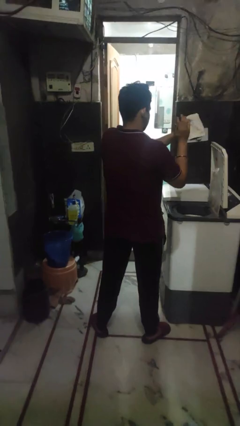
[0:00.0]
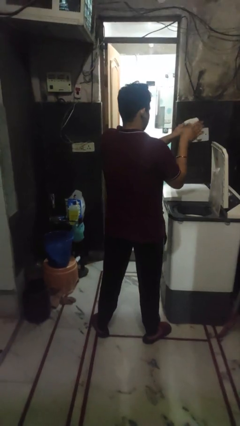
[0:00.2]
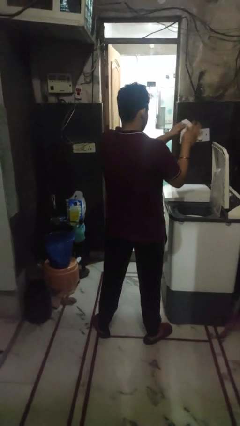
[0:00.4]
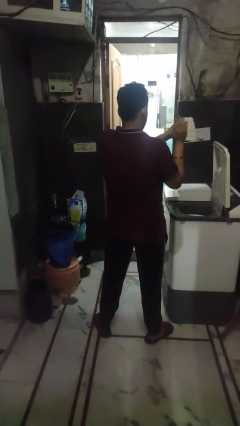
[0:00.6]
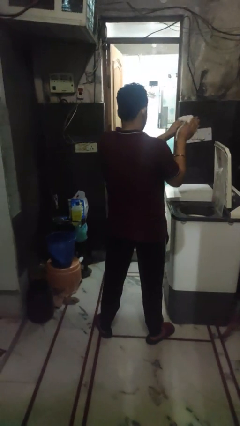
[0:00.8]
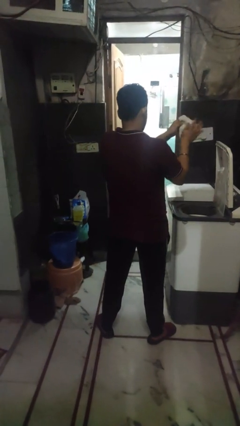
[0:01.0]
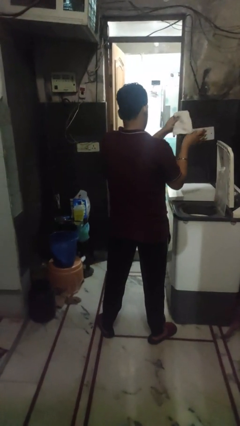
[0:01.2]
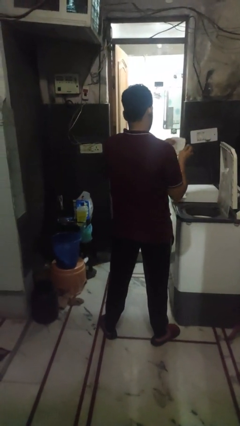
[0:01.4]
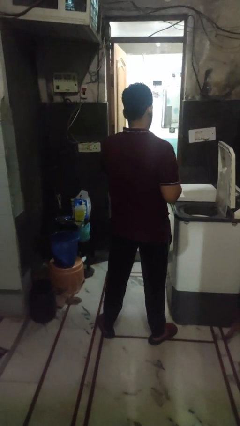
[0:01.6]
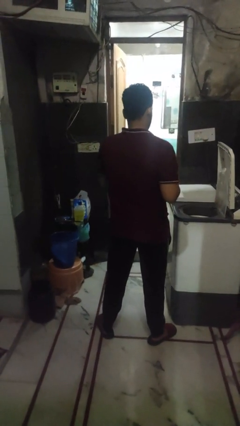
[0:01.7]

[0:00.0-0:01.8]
person cleans dryer lint trap

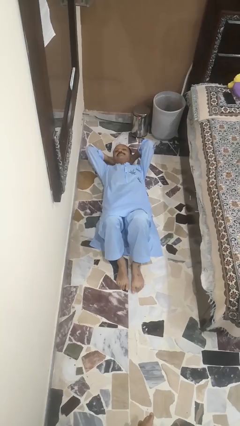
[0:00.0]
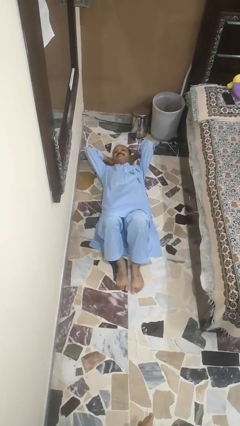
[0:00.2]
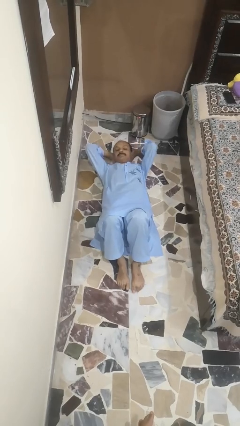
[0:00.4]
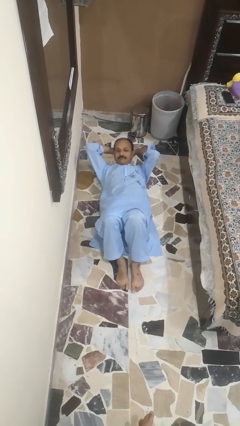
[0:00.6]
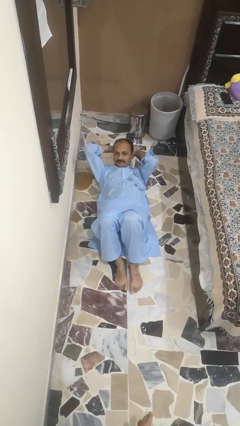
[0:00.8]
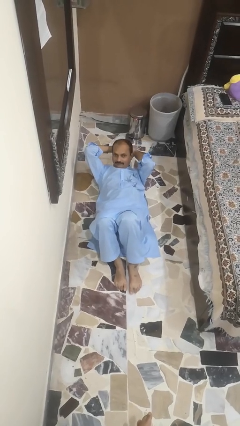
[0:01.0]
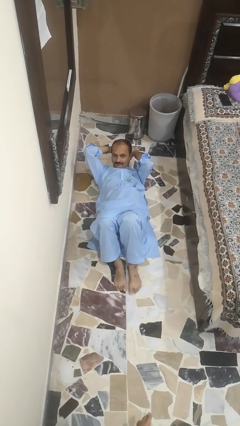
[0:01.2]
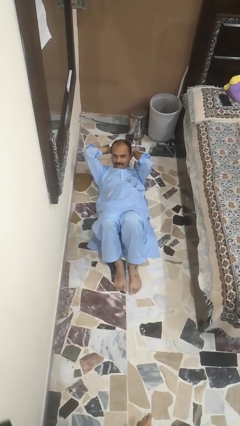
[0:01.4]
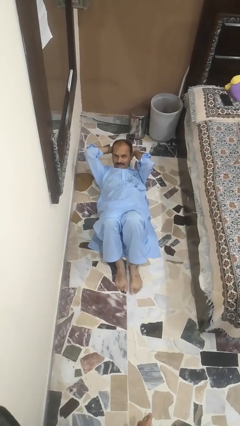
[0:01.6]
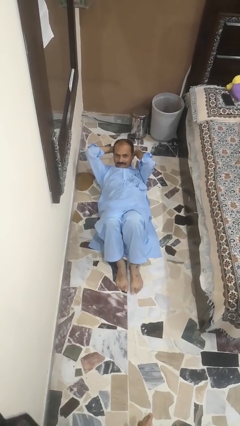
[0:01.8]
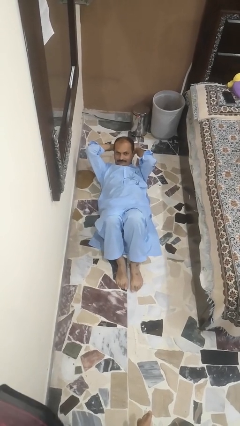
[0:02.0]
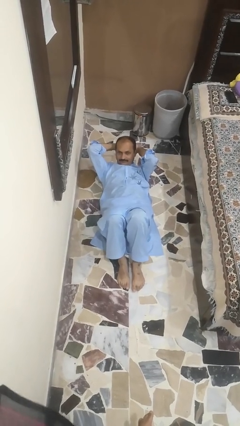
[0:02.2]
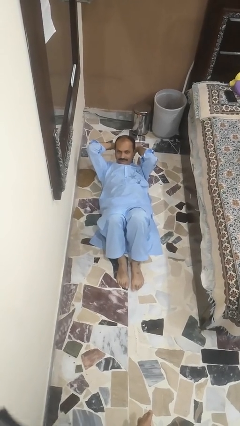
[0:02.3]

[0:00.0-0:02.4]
person exercises with situp

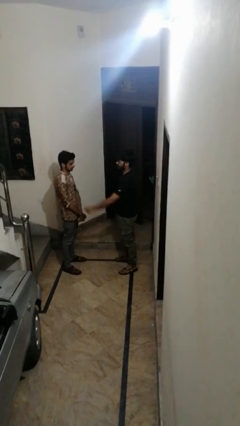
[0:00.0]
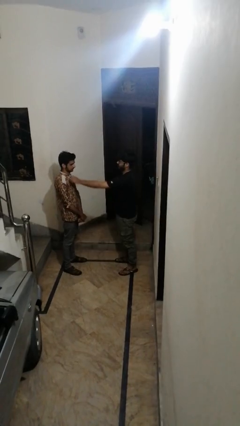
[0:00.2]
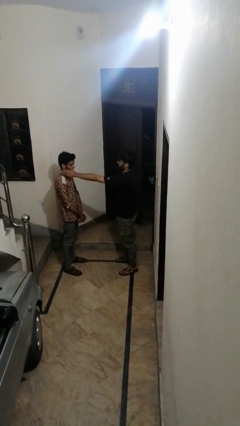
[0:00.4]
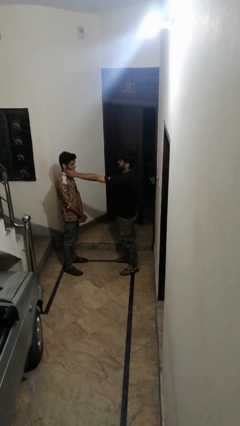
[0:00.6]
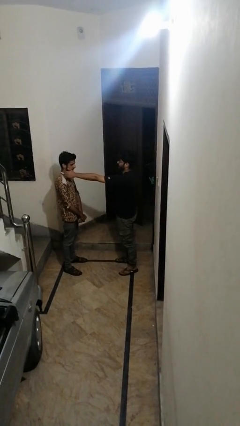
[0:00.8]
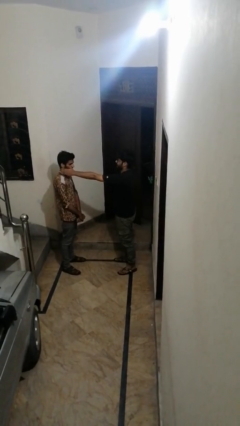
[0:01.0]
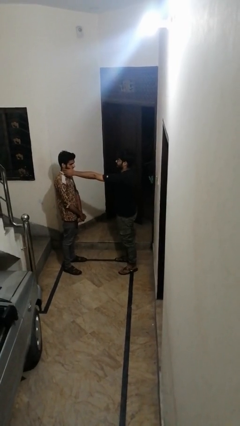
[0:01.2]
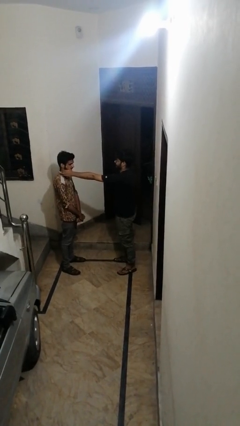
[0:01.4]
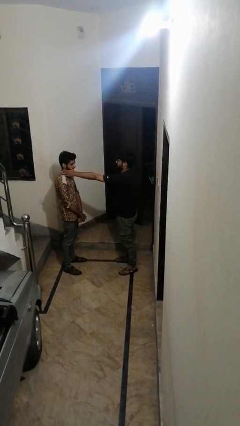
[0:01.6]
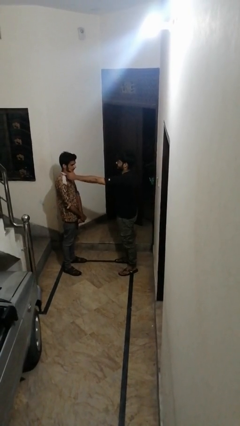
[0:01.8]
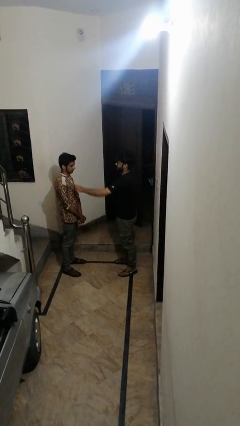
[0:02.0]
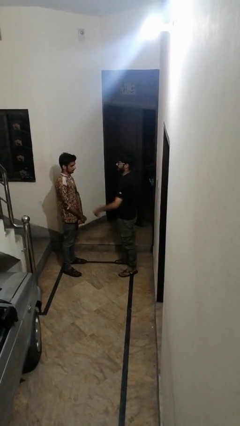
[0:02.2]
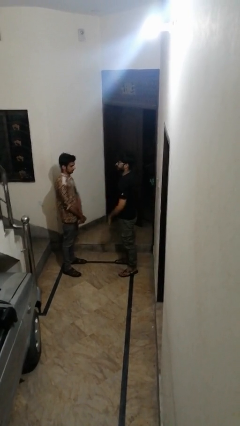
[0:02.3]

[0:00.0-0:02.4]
person touches face of person

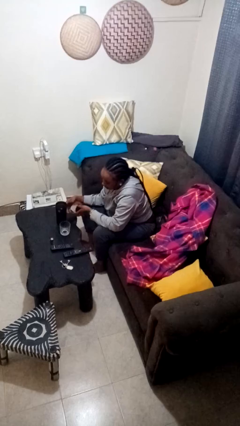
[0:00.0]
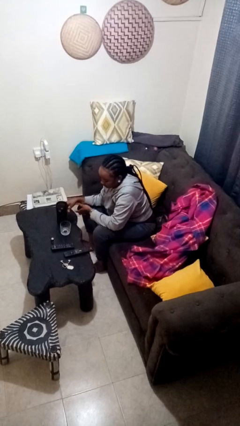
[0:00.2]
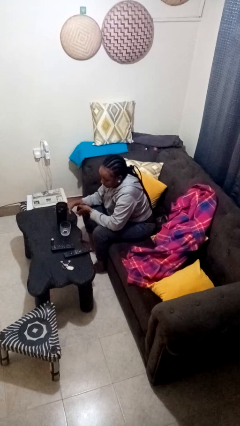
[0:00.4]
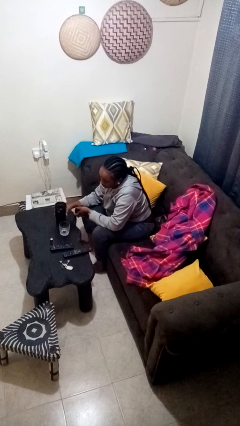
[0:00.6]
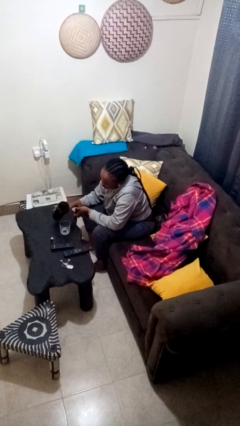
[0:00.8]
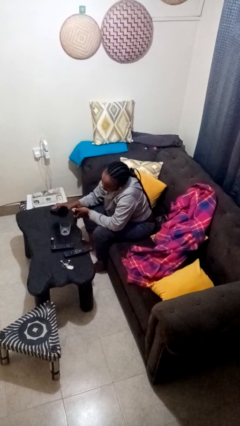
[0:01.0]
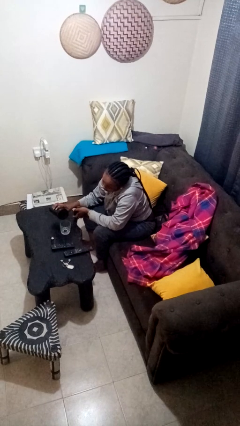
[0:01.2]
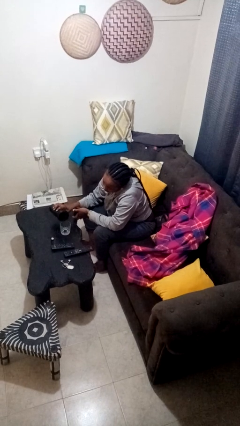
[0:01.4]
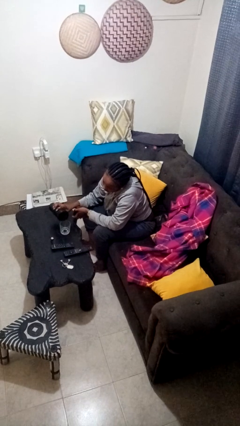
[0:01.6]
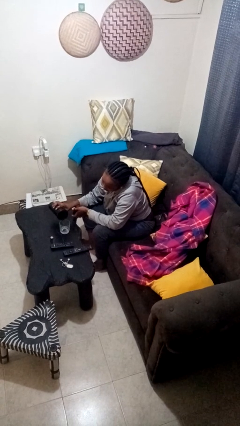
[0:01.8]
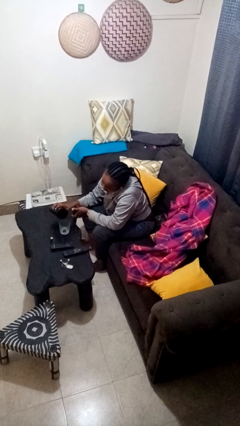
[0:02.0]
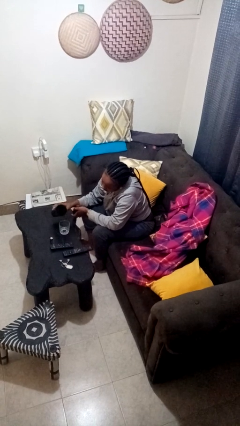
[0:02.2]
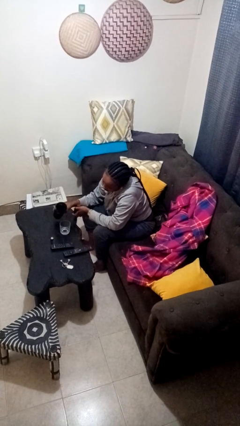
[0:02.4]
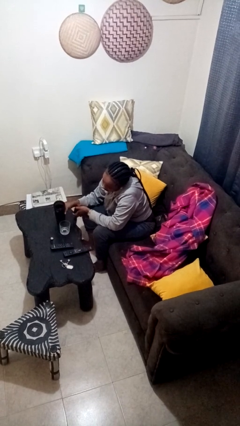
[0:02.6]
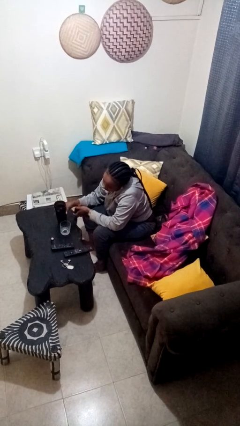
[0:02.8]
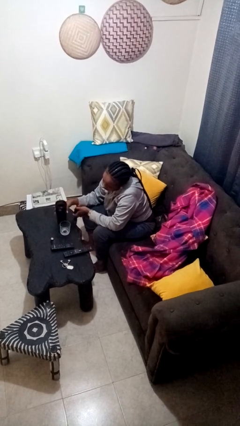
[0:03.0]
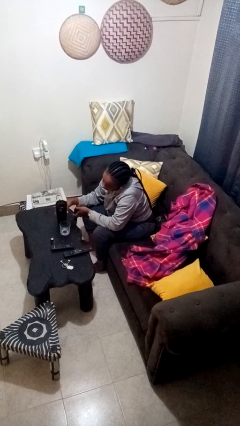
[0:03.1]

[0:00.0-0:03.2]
person pours liquid into cup

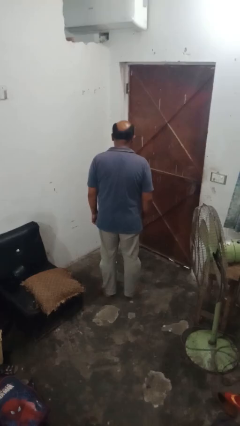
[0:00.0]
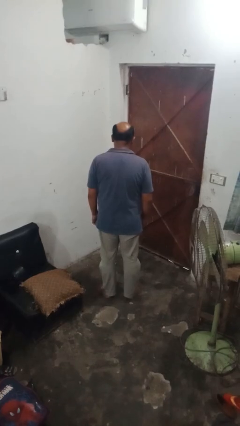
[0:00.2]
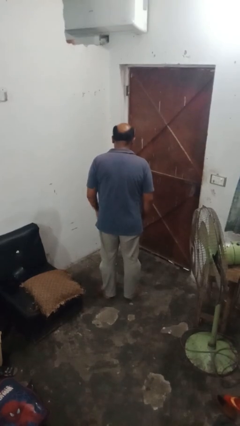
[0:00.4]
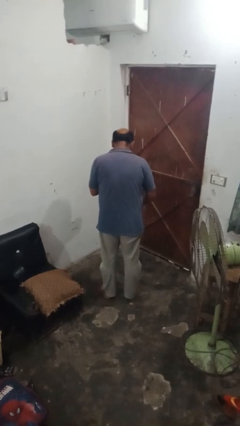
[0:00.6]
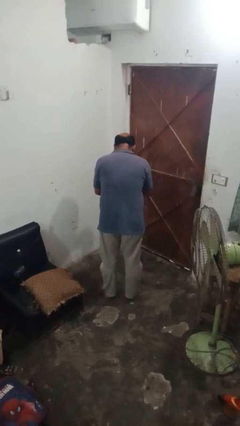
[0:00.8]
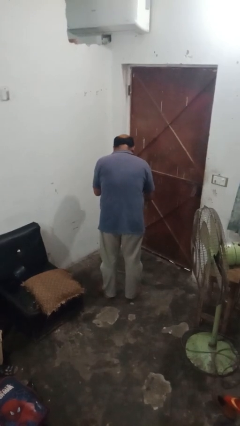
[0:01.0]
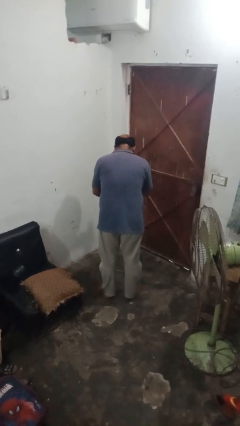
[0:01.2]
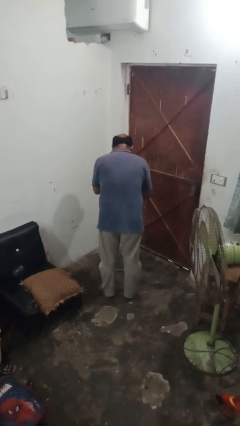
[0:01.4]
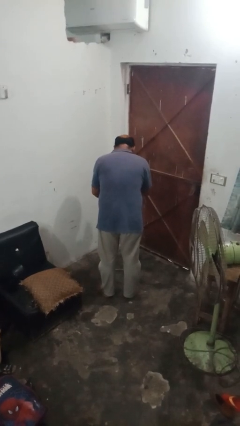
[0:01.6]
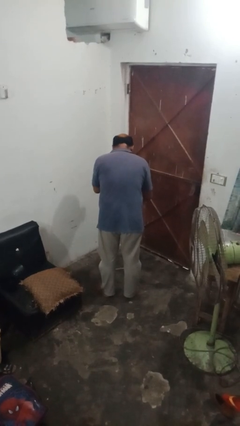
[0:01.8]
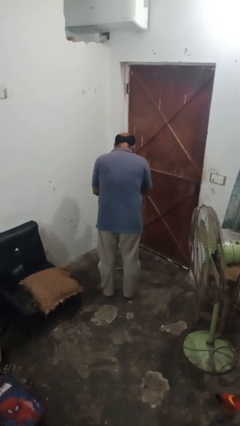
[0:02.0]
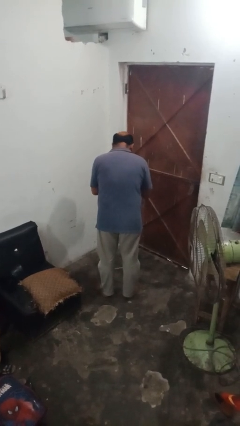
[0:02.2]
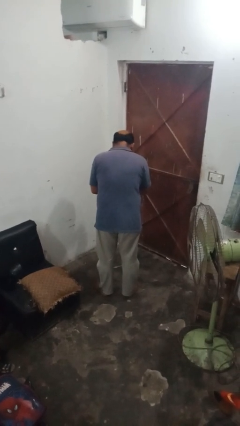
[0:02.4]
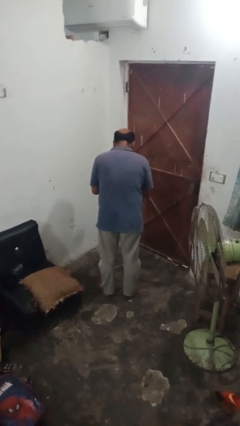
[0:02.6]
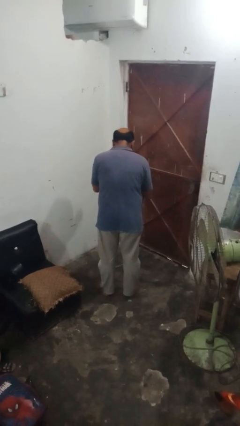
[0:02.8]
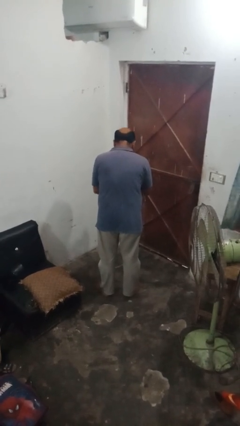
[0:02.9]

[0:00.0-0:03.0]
person drums on chest

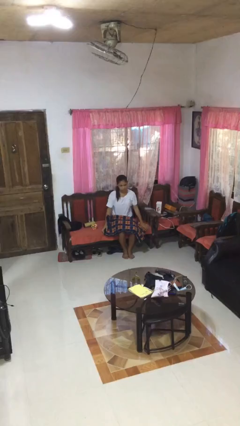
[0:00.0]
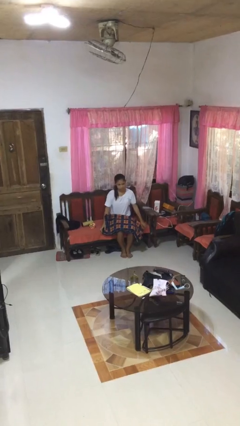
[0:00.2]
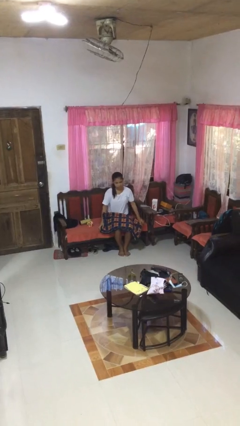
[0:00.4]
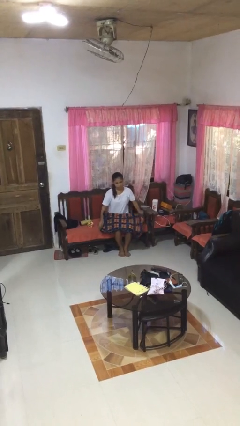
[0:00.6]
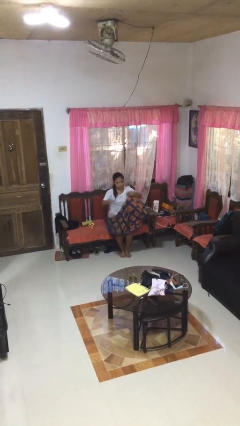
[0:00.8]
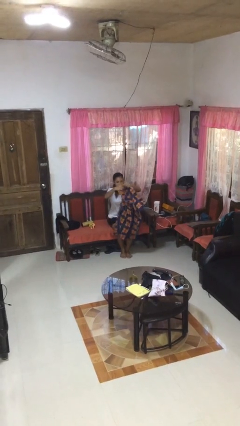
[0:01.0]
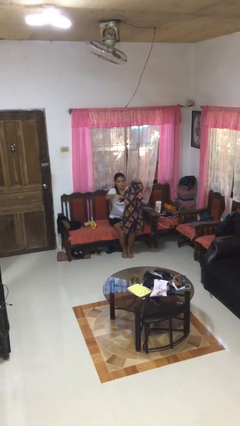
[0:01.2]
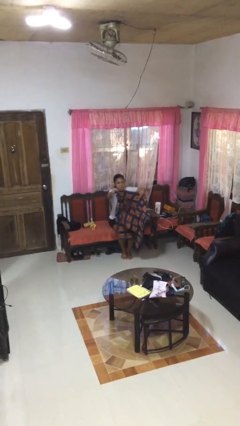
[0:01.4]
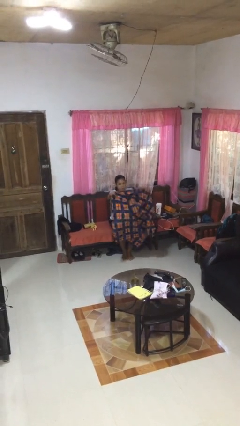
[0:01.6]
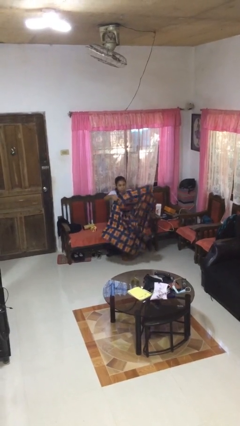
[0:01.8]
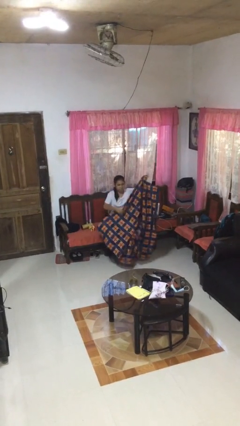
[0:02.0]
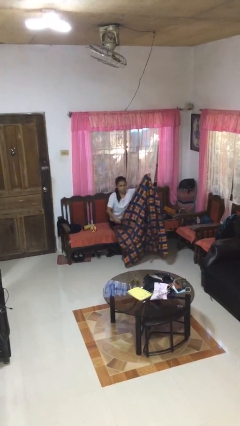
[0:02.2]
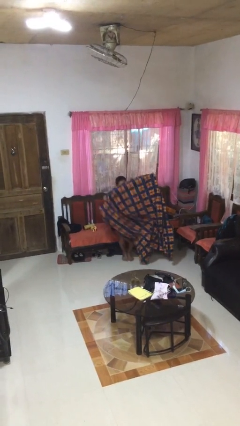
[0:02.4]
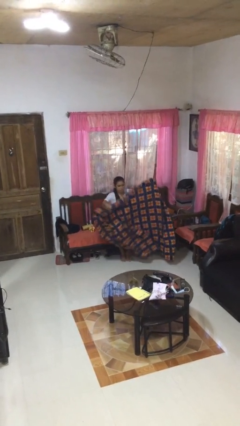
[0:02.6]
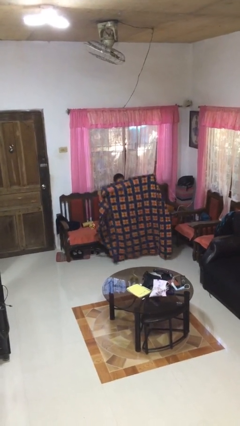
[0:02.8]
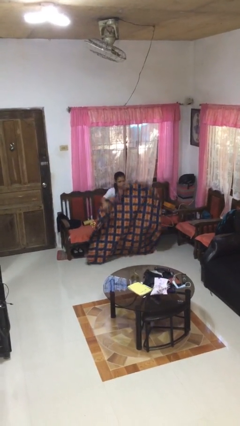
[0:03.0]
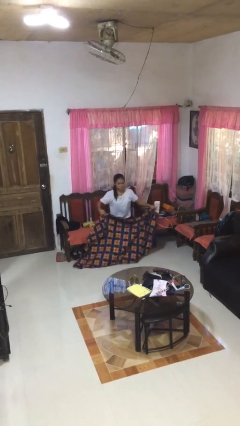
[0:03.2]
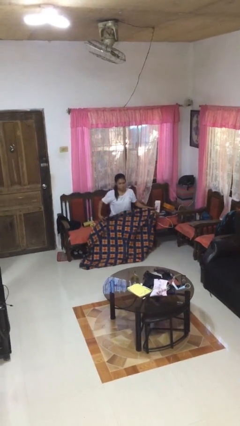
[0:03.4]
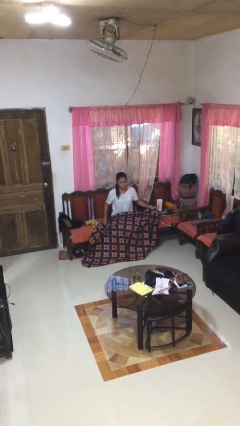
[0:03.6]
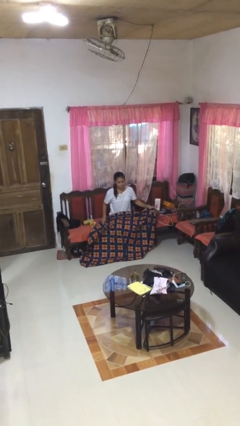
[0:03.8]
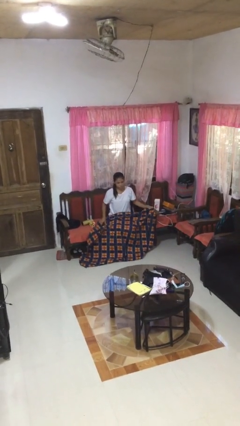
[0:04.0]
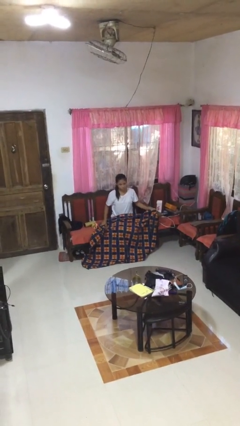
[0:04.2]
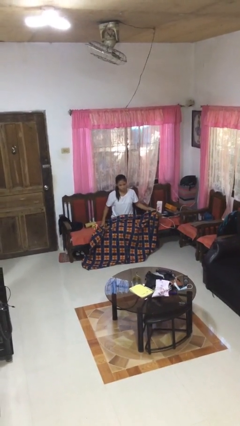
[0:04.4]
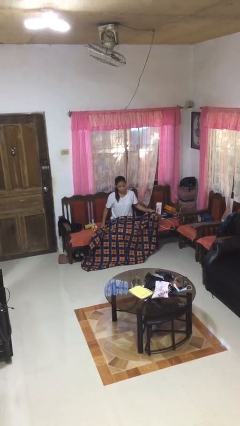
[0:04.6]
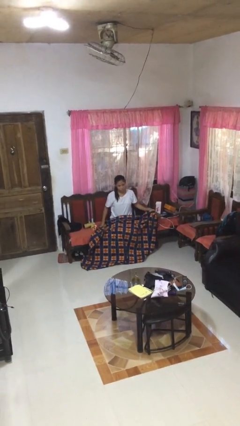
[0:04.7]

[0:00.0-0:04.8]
person unfolds blanket
